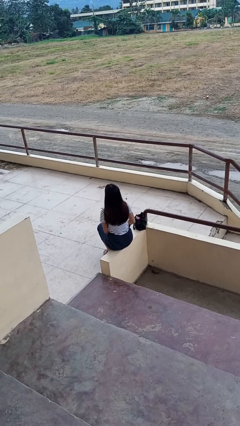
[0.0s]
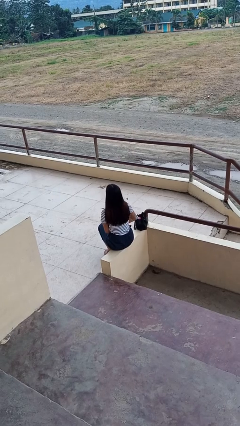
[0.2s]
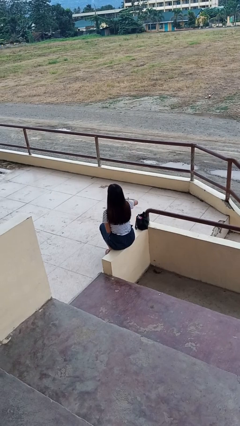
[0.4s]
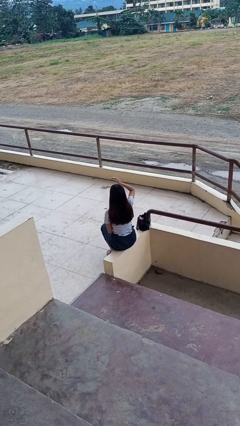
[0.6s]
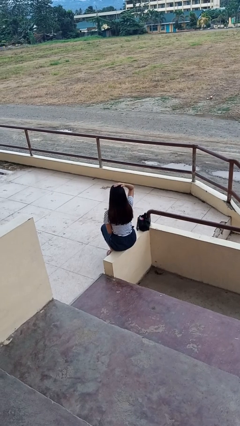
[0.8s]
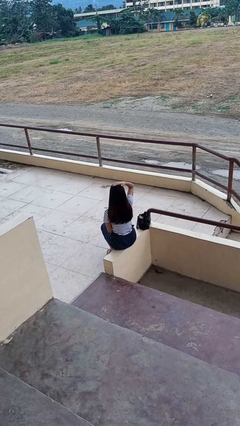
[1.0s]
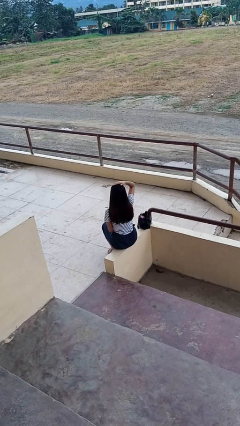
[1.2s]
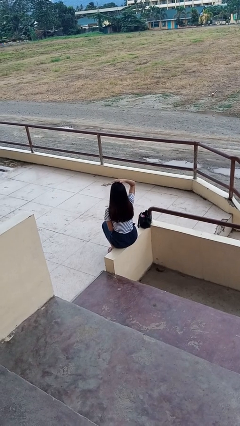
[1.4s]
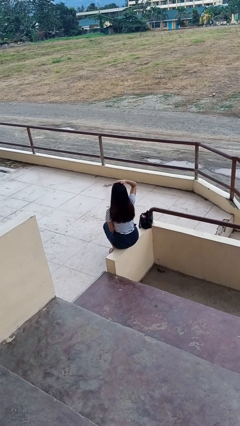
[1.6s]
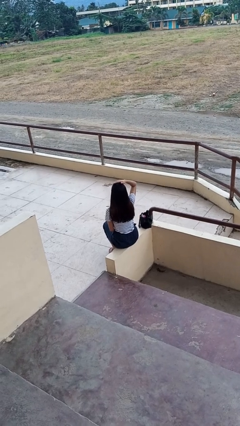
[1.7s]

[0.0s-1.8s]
person pats head

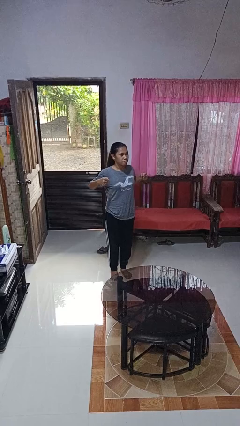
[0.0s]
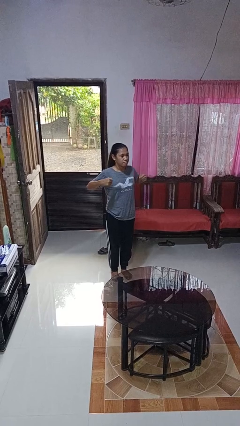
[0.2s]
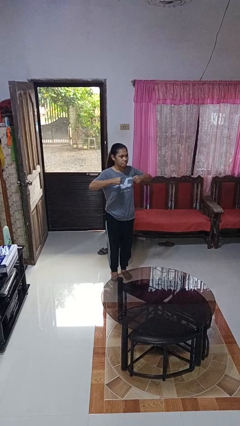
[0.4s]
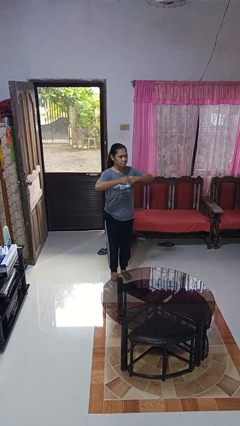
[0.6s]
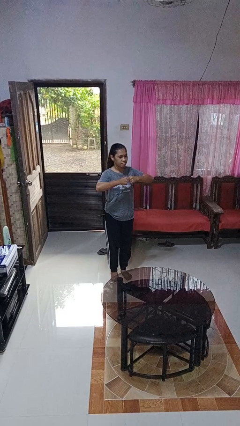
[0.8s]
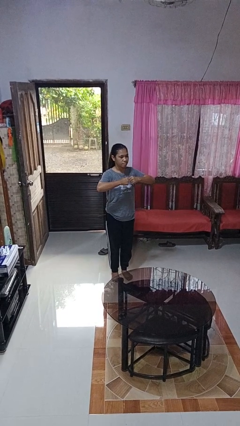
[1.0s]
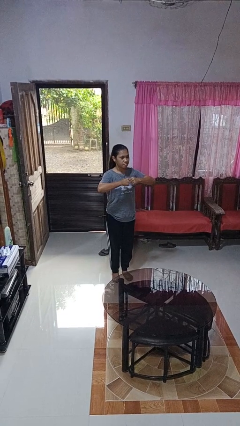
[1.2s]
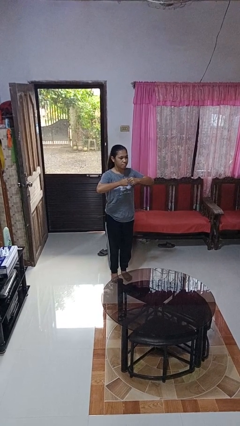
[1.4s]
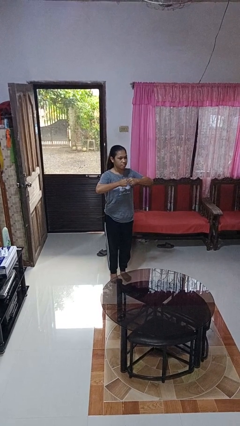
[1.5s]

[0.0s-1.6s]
person gestures zoom out

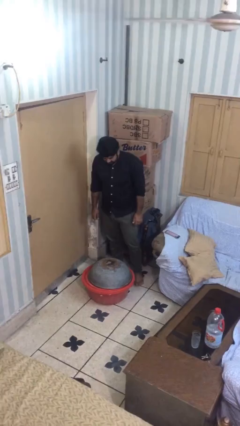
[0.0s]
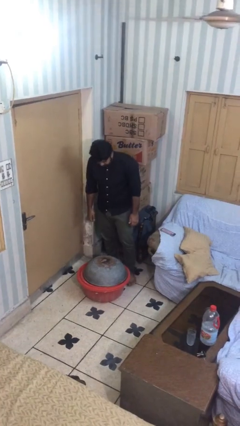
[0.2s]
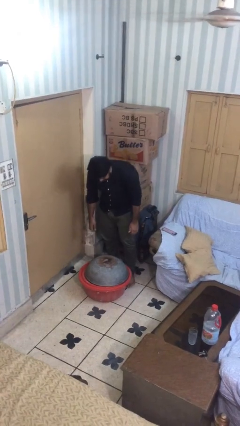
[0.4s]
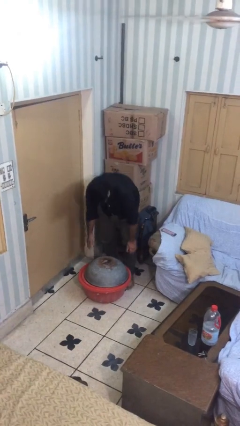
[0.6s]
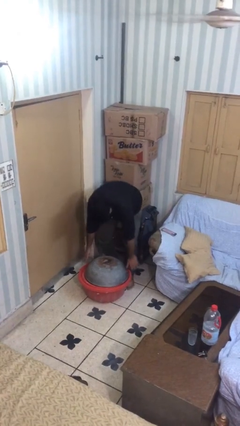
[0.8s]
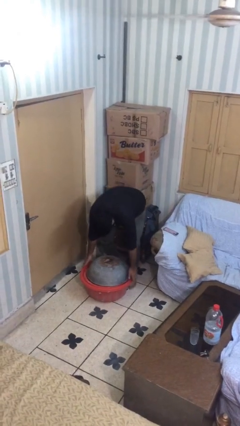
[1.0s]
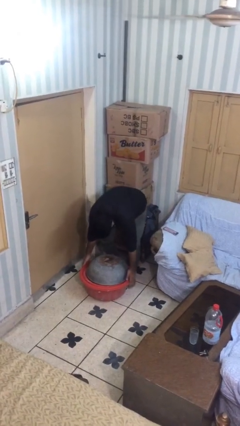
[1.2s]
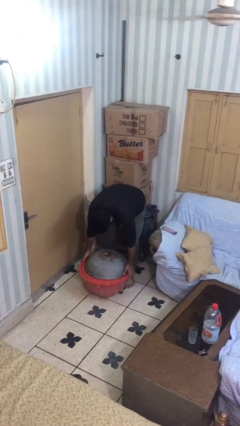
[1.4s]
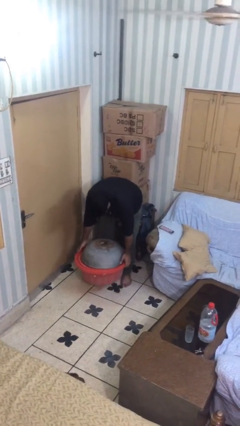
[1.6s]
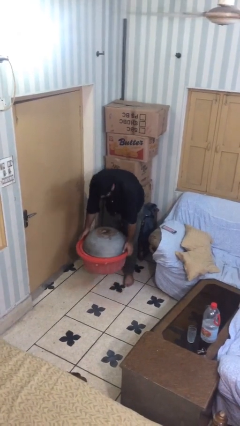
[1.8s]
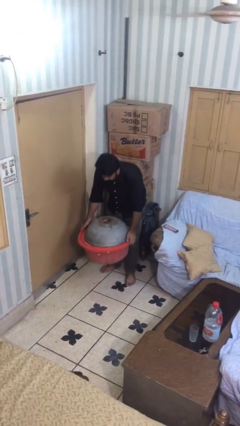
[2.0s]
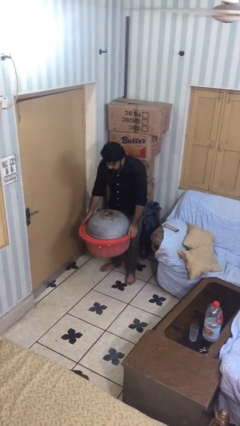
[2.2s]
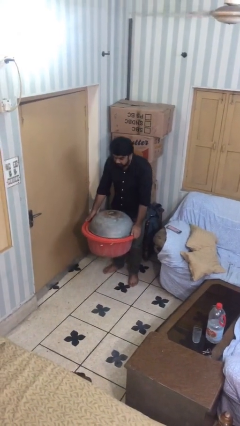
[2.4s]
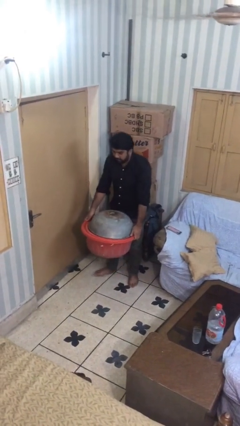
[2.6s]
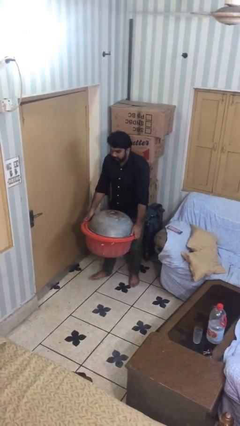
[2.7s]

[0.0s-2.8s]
person picks up object from floor

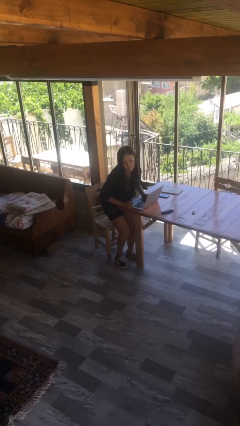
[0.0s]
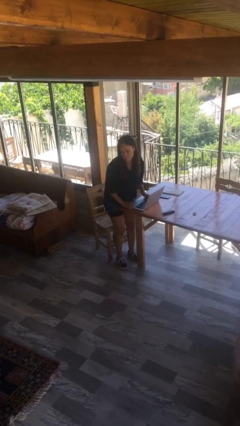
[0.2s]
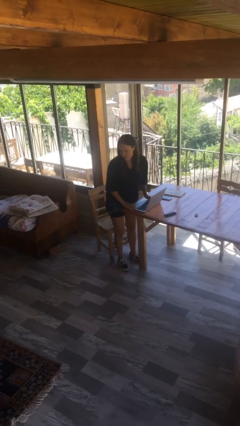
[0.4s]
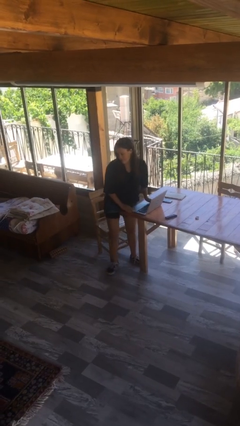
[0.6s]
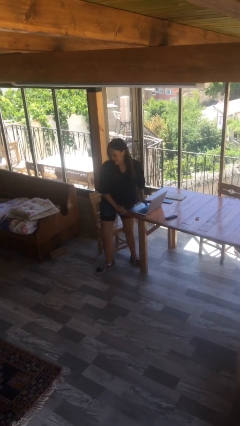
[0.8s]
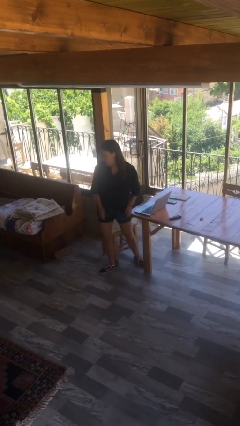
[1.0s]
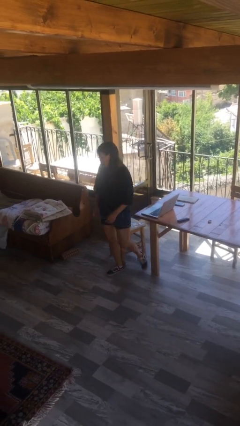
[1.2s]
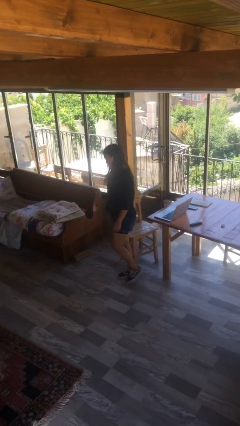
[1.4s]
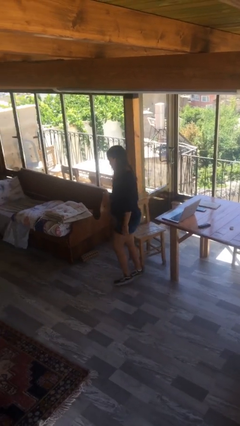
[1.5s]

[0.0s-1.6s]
person stands up

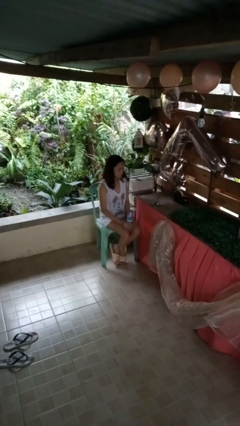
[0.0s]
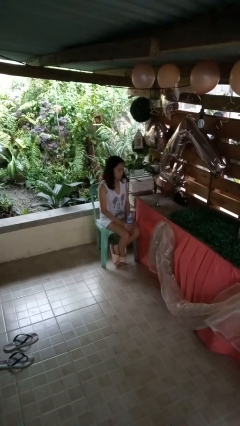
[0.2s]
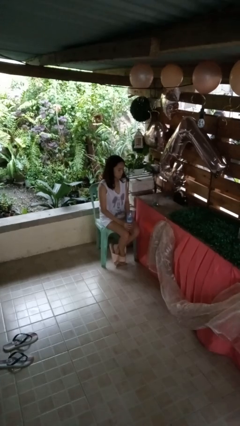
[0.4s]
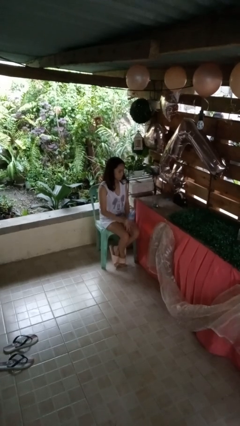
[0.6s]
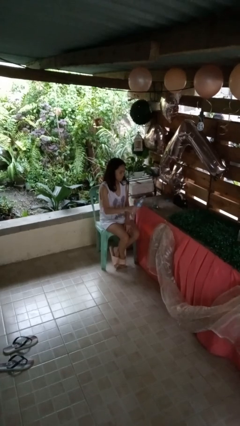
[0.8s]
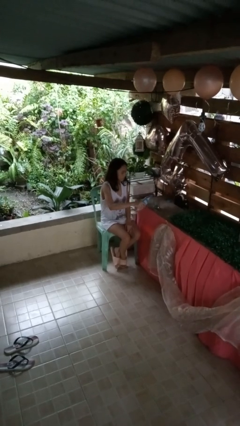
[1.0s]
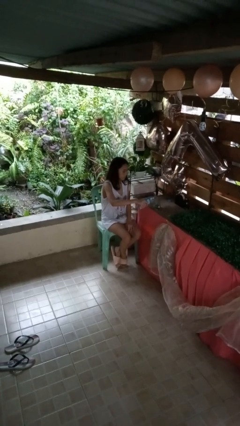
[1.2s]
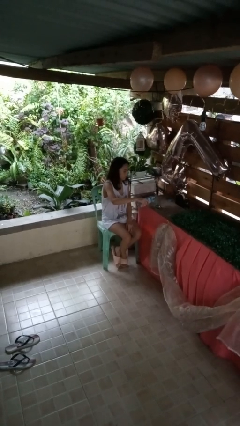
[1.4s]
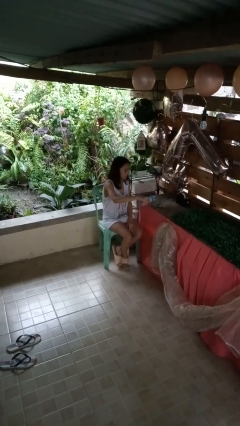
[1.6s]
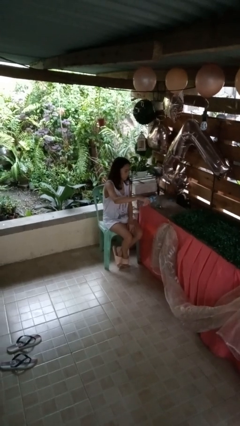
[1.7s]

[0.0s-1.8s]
person pours liquid into cup

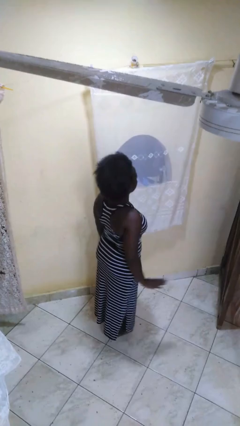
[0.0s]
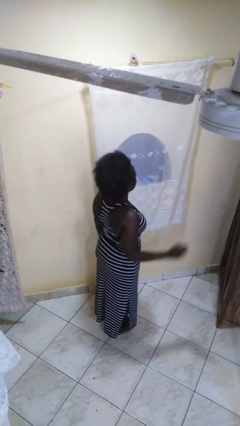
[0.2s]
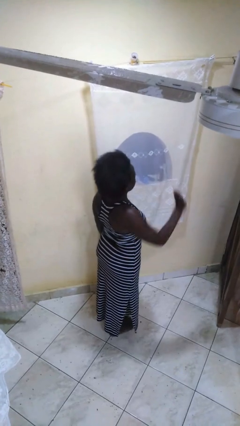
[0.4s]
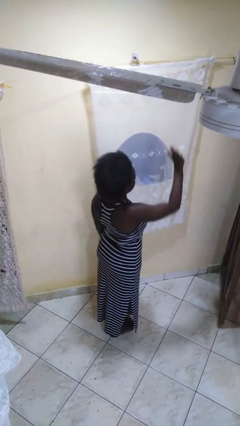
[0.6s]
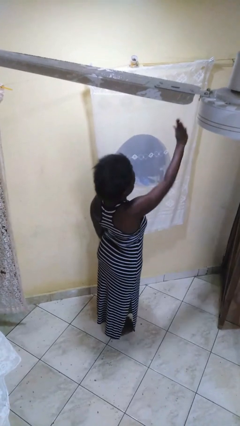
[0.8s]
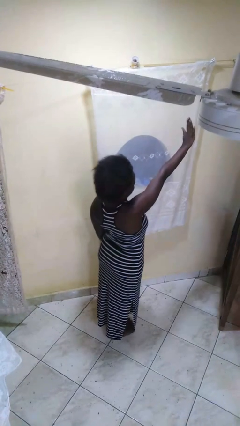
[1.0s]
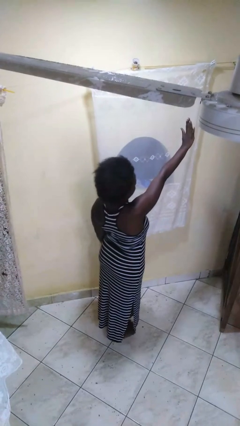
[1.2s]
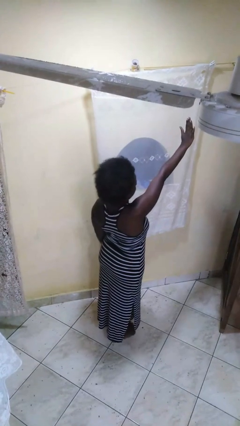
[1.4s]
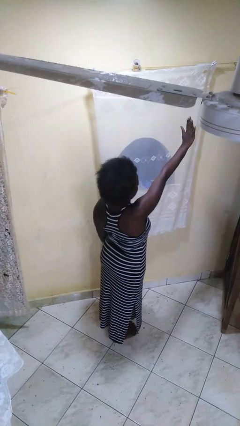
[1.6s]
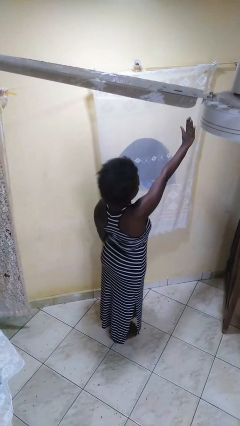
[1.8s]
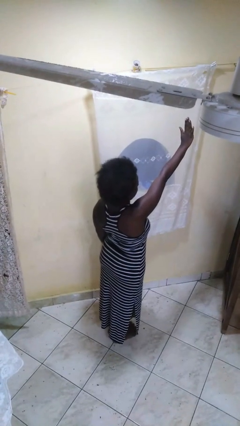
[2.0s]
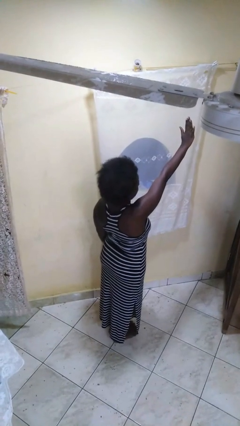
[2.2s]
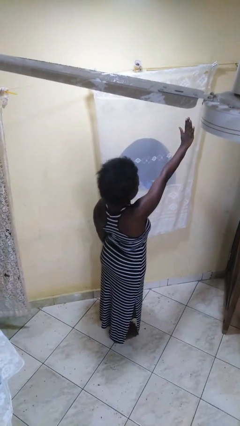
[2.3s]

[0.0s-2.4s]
person gestures stop

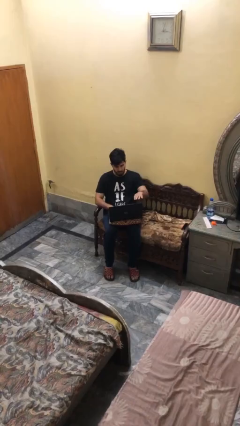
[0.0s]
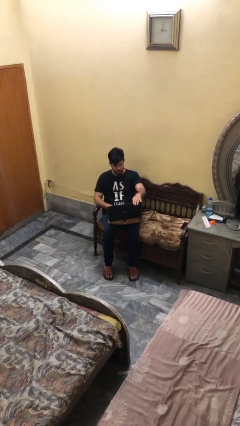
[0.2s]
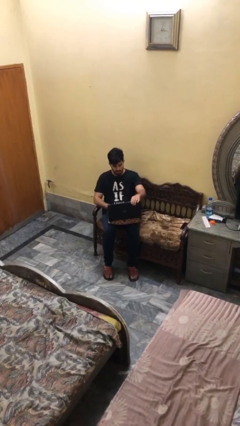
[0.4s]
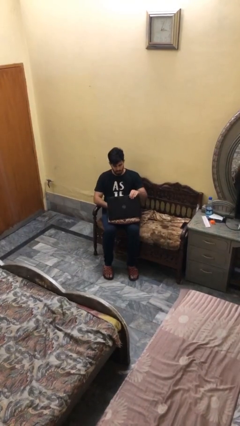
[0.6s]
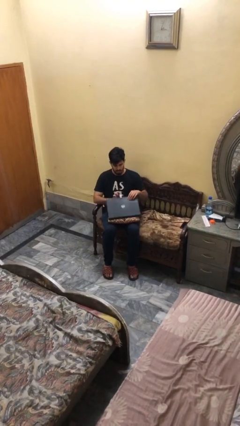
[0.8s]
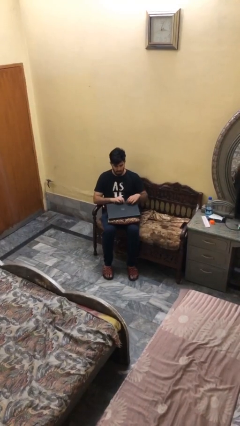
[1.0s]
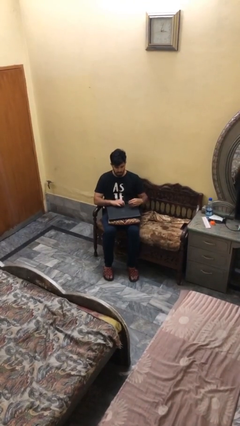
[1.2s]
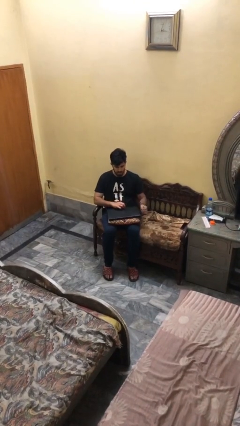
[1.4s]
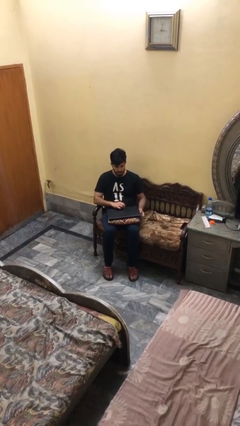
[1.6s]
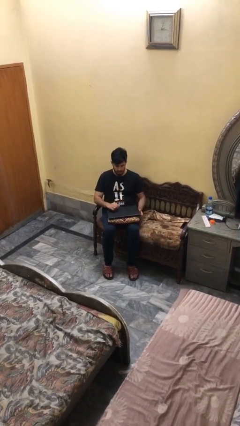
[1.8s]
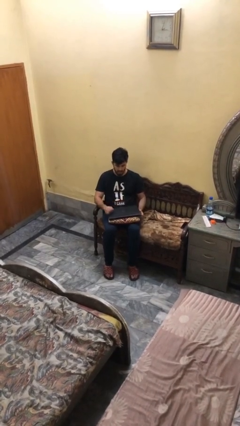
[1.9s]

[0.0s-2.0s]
person closes laptop

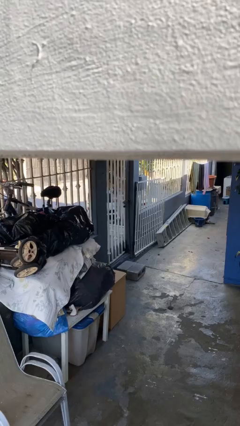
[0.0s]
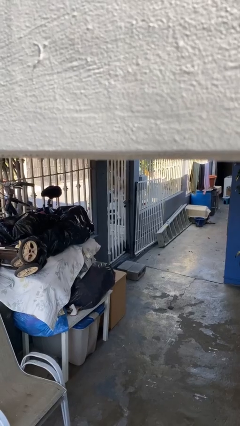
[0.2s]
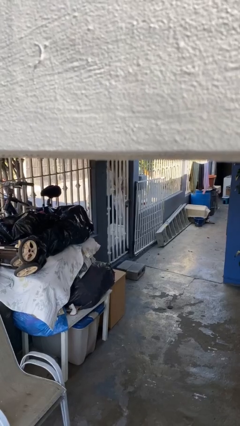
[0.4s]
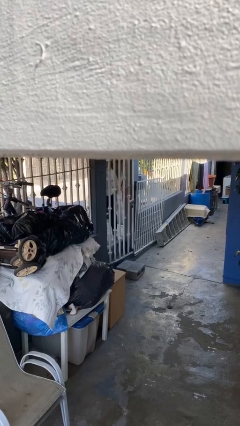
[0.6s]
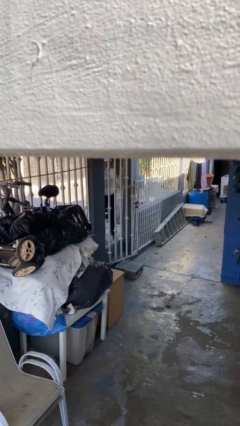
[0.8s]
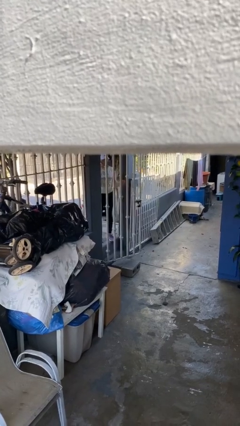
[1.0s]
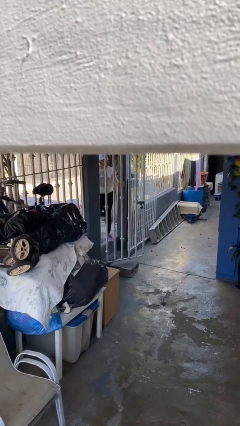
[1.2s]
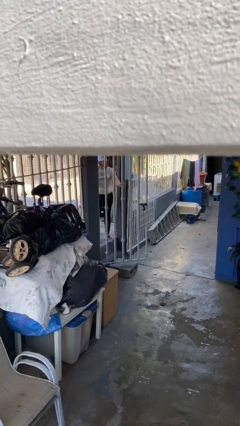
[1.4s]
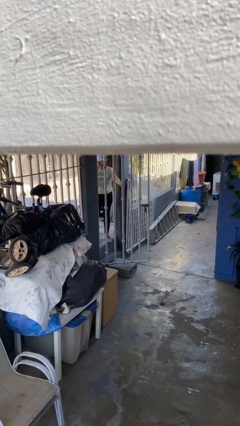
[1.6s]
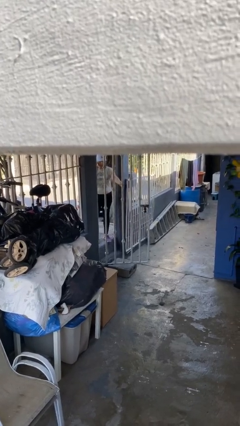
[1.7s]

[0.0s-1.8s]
person opens facility door

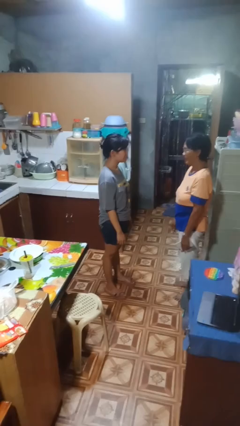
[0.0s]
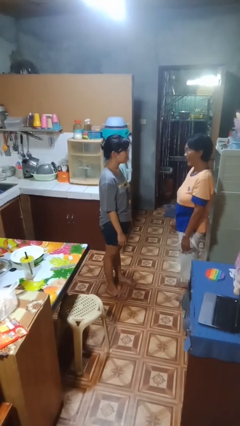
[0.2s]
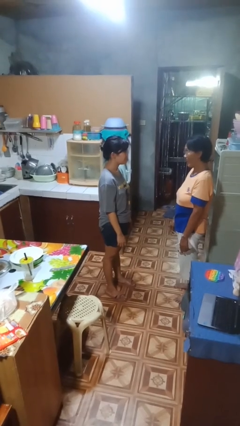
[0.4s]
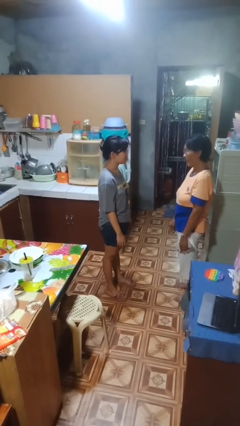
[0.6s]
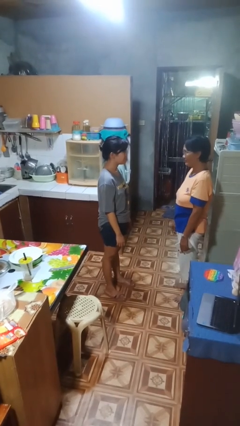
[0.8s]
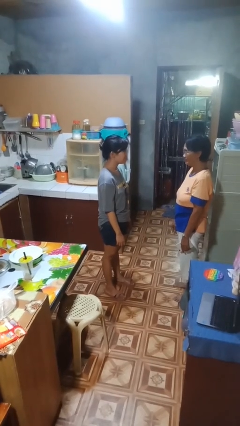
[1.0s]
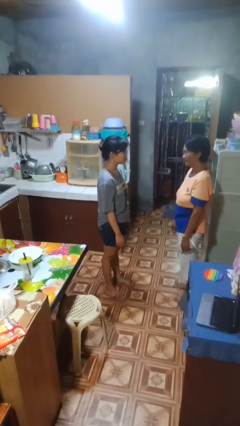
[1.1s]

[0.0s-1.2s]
person laughs with person
